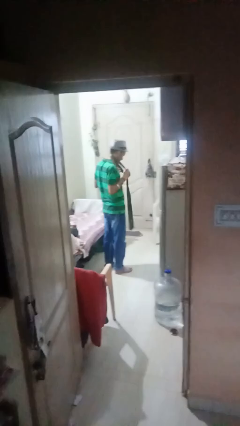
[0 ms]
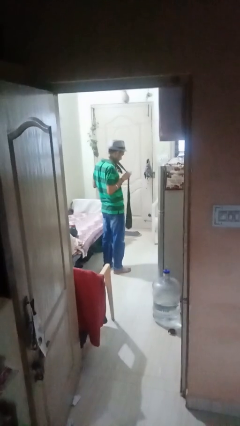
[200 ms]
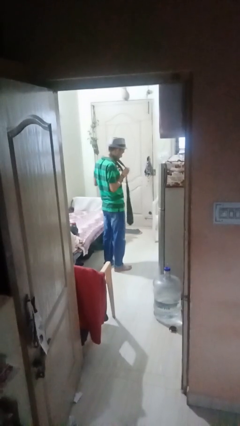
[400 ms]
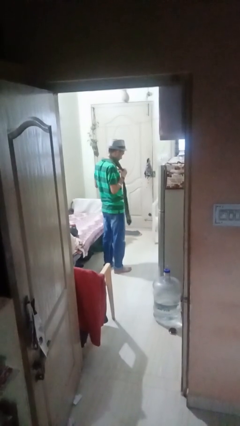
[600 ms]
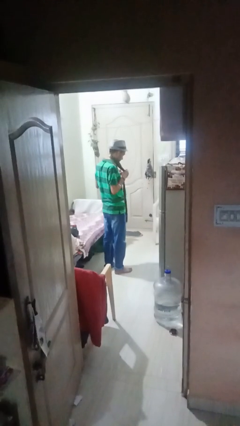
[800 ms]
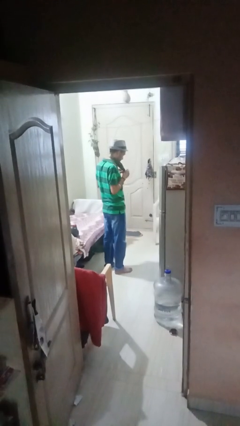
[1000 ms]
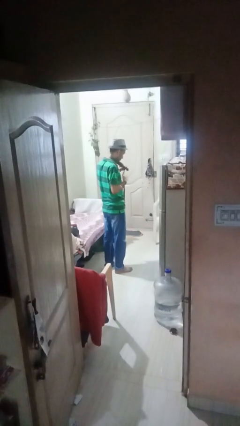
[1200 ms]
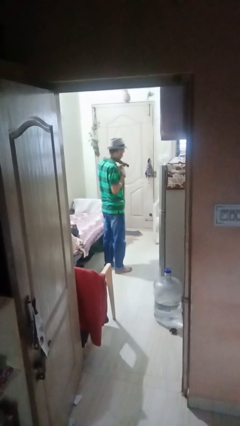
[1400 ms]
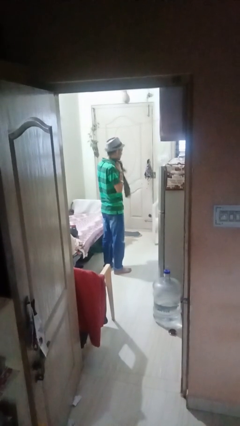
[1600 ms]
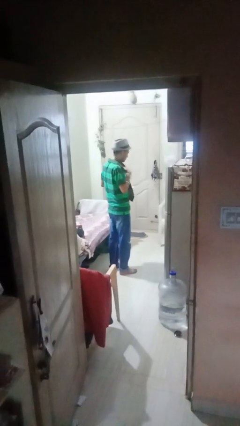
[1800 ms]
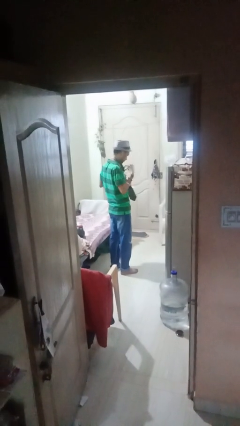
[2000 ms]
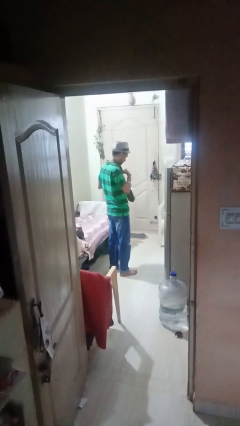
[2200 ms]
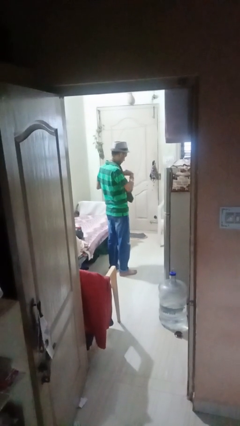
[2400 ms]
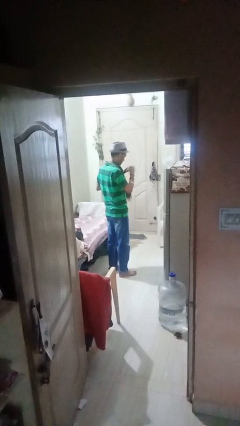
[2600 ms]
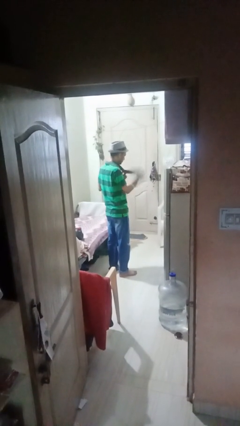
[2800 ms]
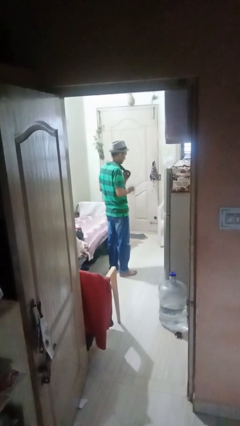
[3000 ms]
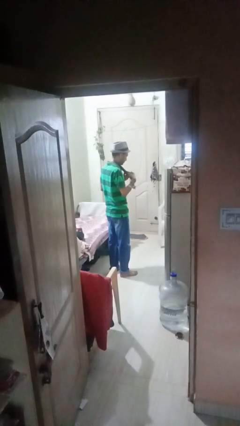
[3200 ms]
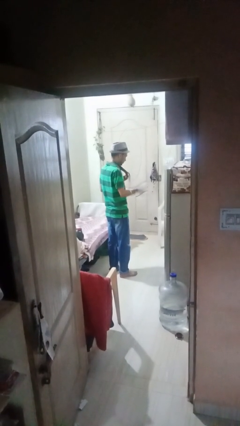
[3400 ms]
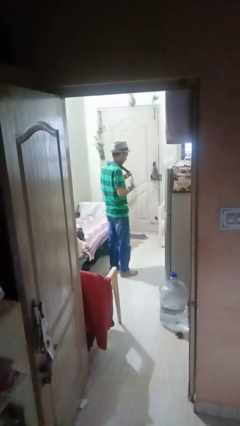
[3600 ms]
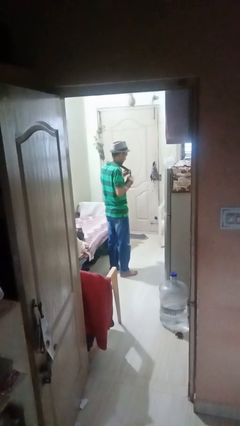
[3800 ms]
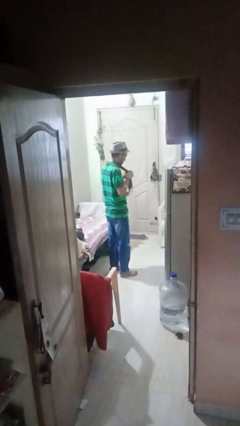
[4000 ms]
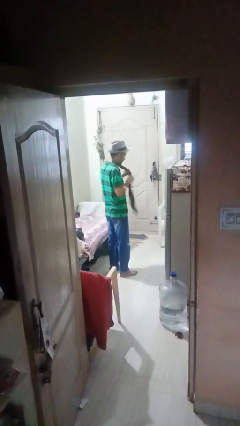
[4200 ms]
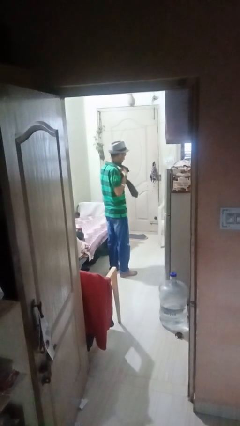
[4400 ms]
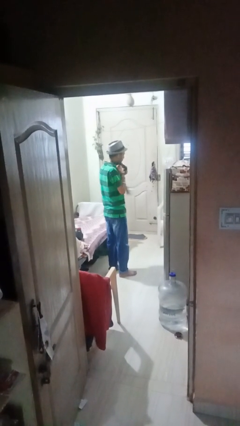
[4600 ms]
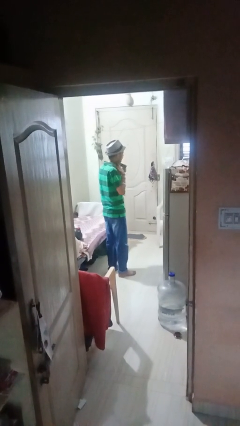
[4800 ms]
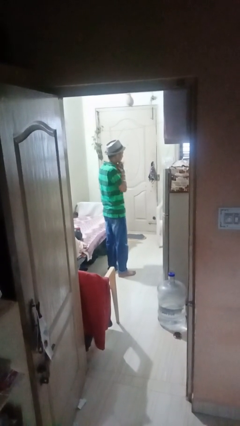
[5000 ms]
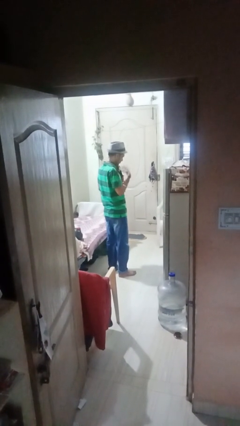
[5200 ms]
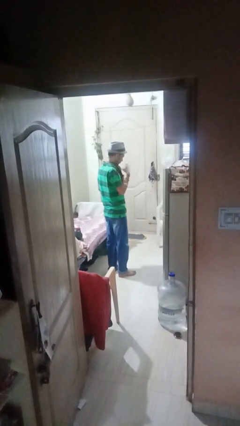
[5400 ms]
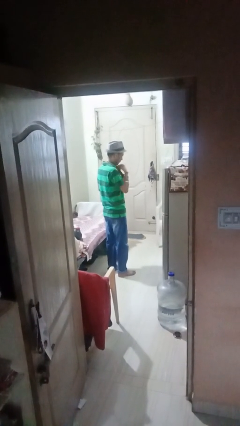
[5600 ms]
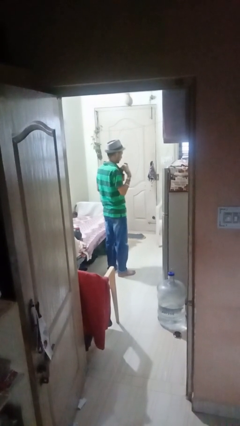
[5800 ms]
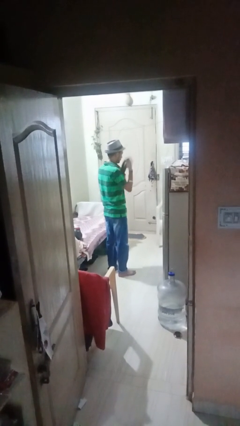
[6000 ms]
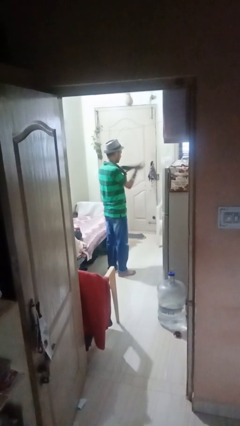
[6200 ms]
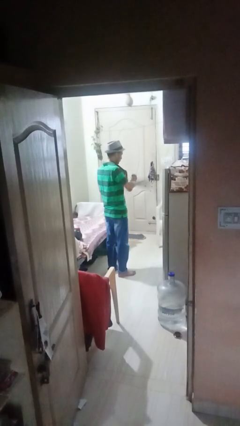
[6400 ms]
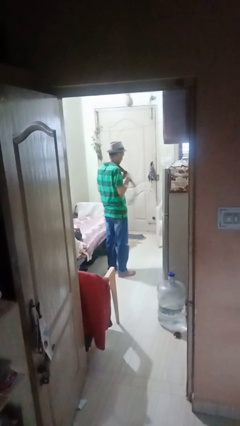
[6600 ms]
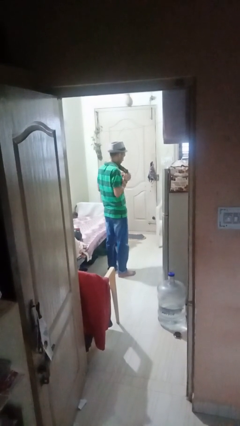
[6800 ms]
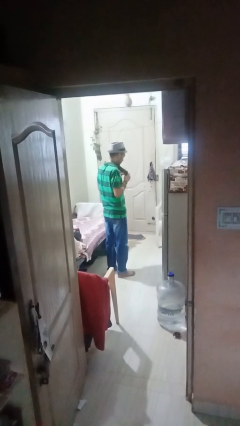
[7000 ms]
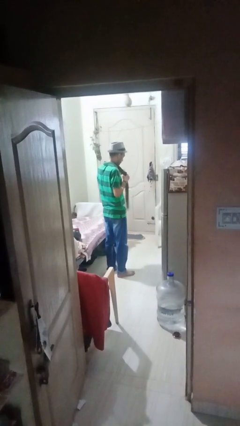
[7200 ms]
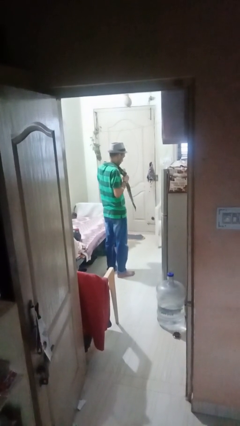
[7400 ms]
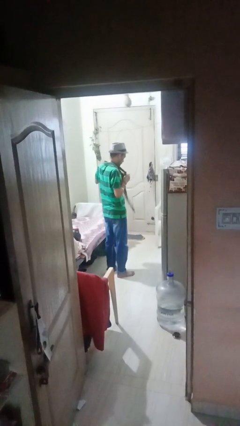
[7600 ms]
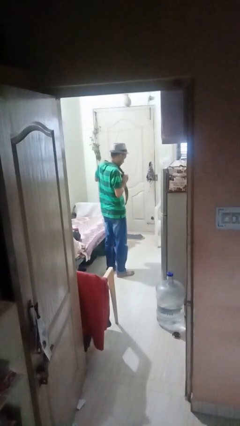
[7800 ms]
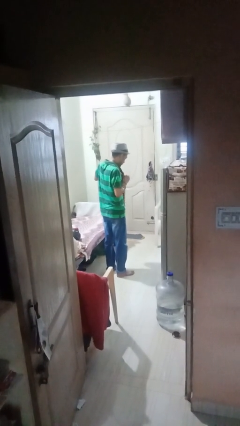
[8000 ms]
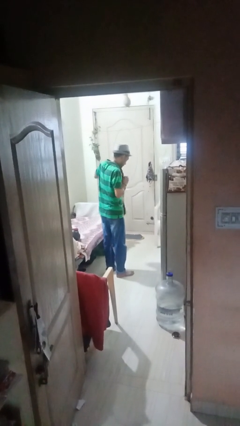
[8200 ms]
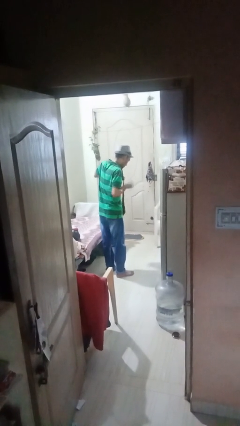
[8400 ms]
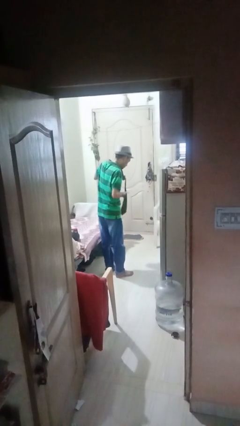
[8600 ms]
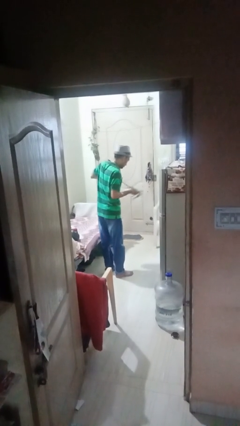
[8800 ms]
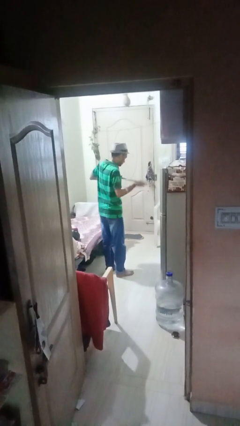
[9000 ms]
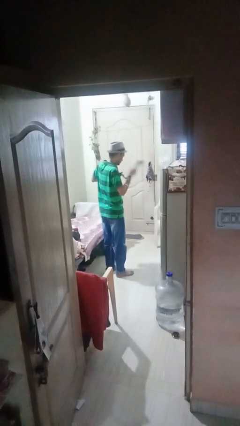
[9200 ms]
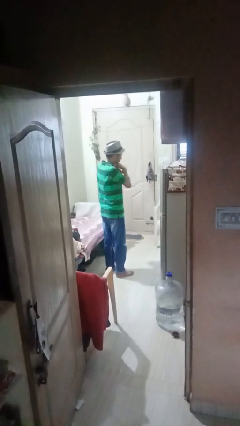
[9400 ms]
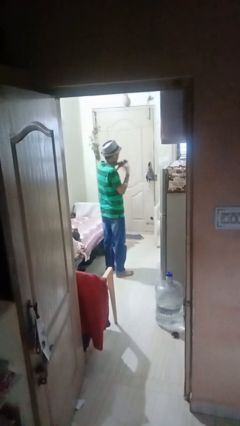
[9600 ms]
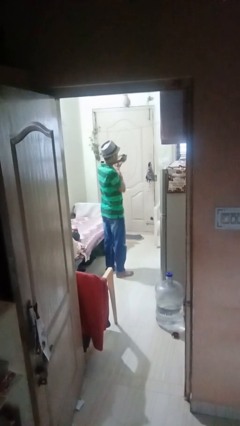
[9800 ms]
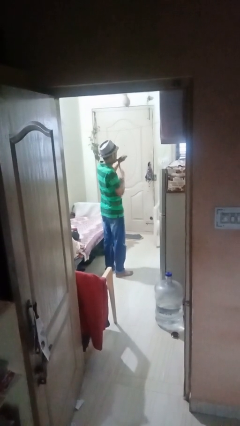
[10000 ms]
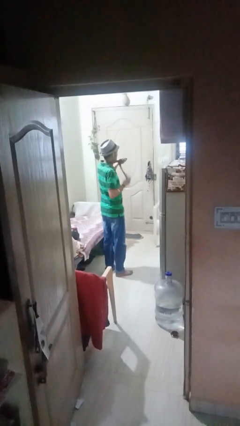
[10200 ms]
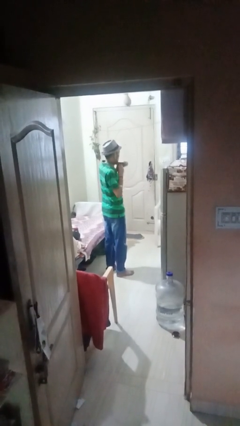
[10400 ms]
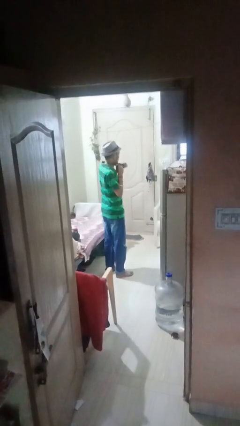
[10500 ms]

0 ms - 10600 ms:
person puts on necktie

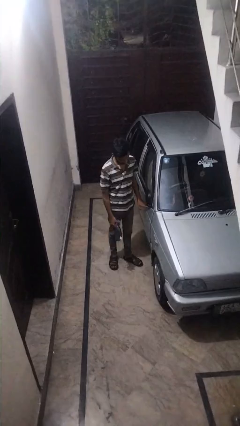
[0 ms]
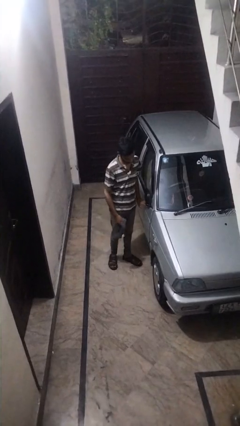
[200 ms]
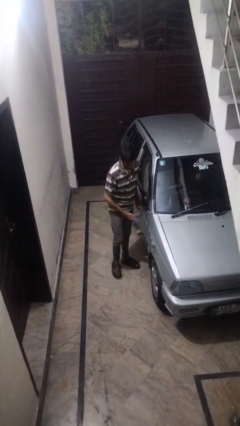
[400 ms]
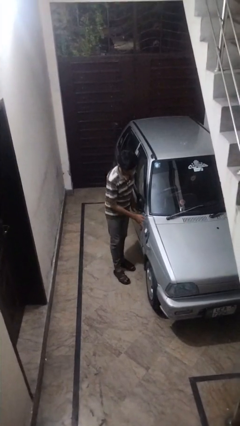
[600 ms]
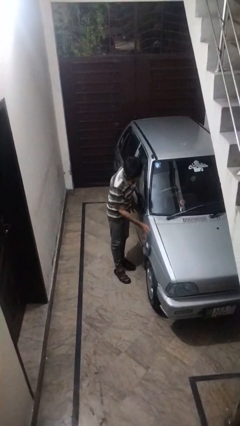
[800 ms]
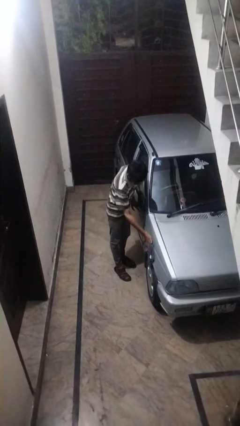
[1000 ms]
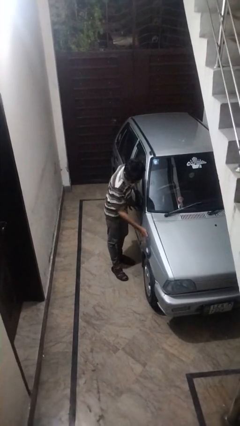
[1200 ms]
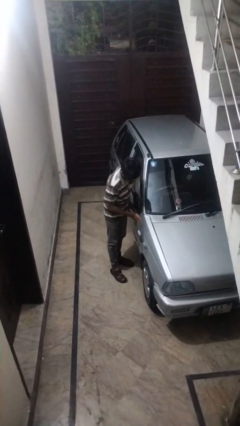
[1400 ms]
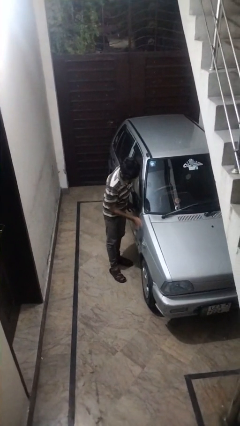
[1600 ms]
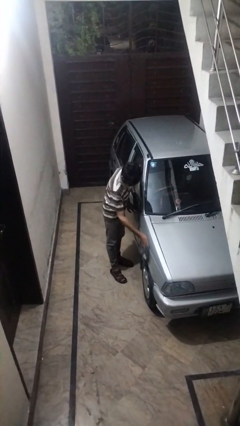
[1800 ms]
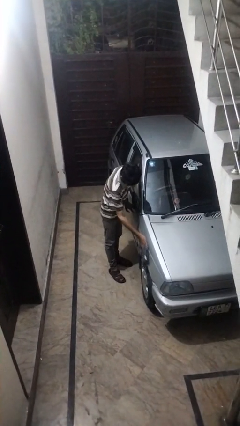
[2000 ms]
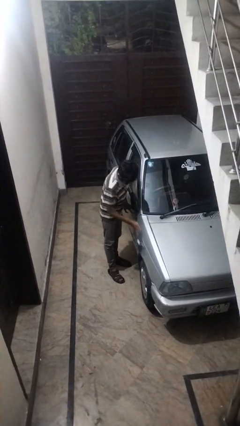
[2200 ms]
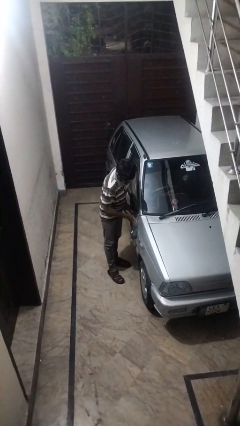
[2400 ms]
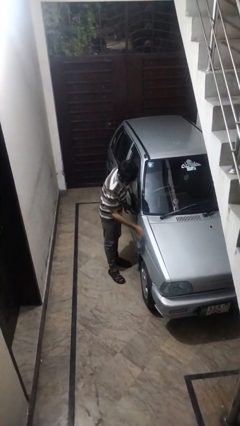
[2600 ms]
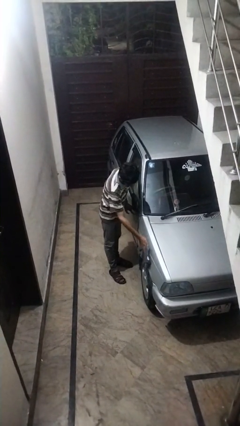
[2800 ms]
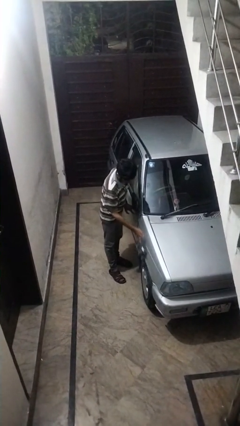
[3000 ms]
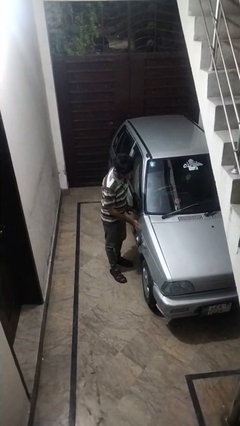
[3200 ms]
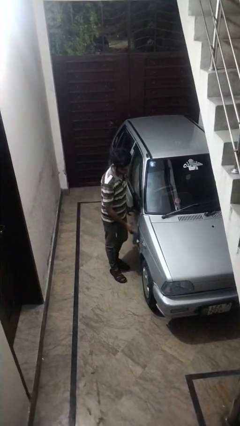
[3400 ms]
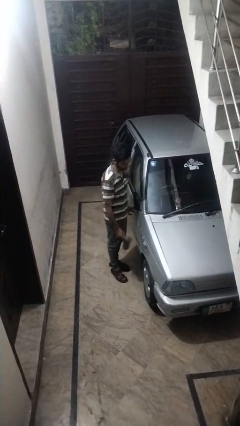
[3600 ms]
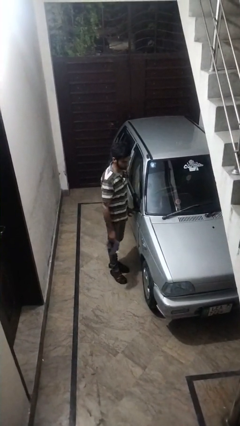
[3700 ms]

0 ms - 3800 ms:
person polishes car with rag

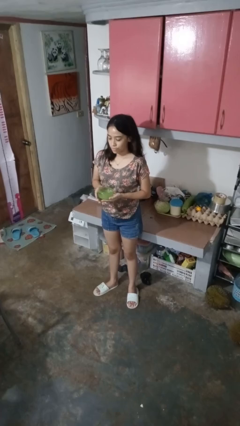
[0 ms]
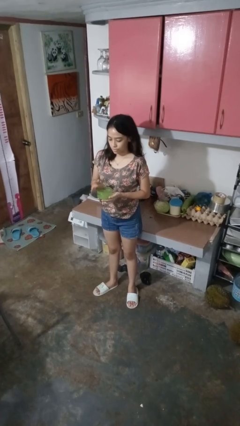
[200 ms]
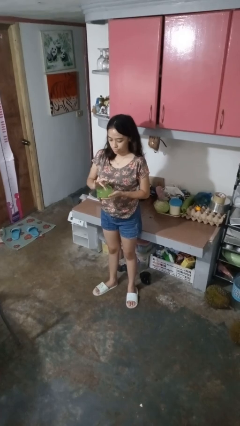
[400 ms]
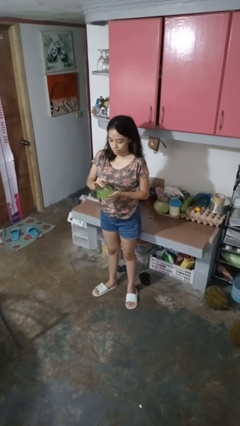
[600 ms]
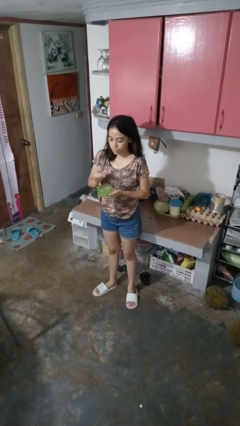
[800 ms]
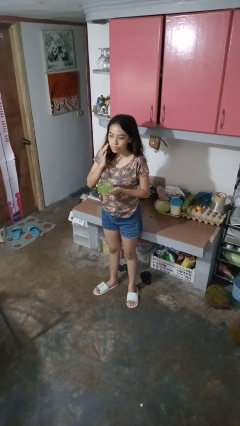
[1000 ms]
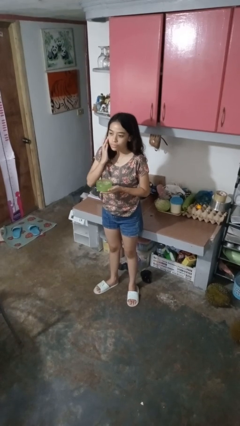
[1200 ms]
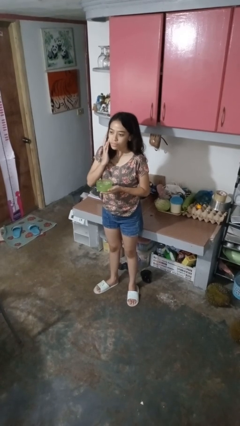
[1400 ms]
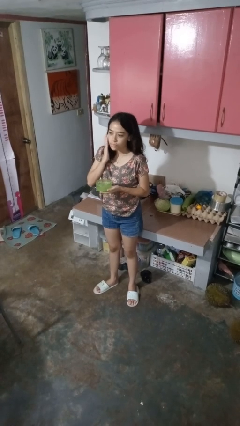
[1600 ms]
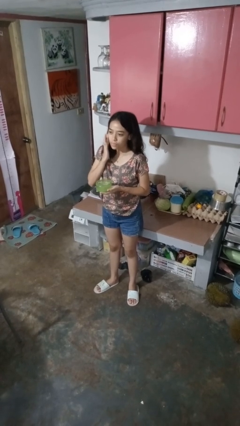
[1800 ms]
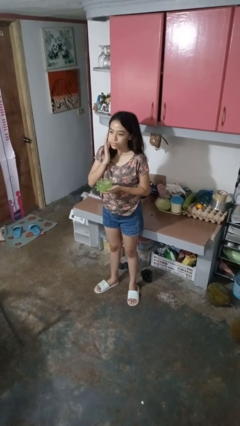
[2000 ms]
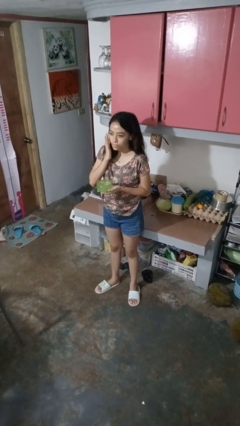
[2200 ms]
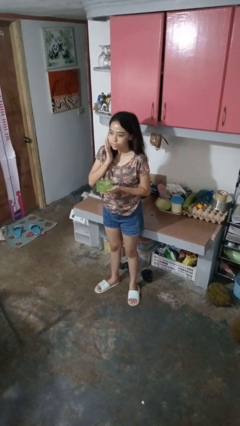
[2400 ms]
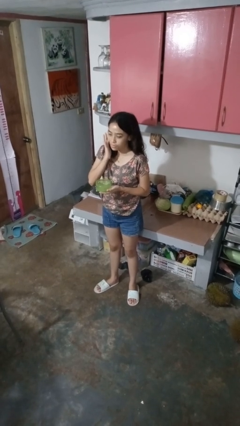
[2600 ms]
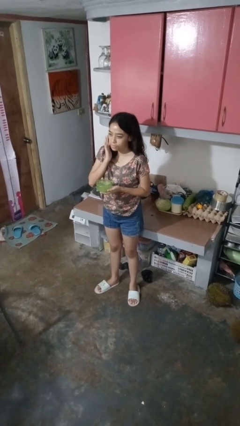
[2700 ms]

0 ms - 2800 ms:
person applies facial moisturizer

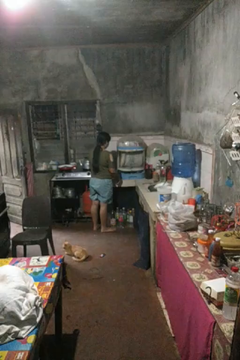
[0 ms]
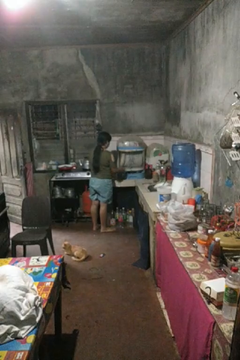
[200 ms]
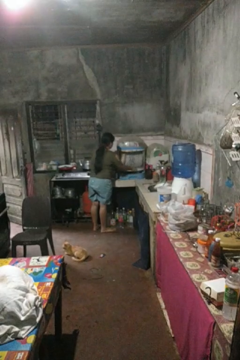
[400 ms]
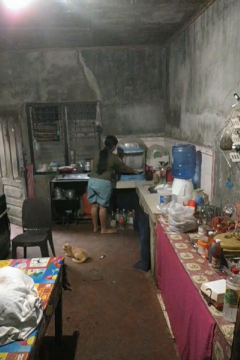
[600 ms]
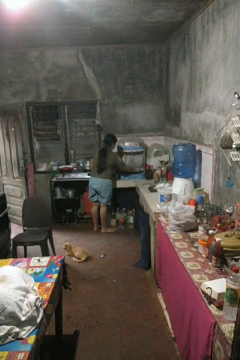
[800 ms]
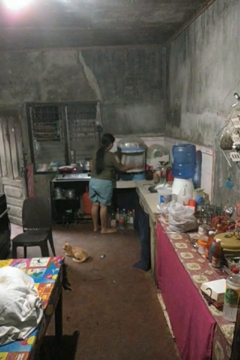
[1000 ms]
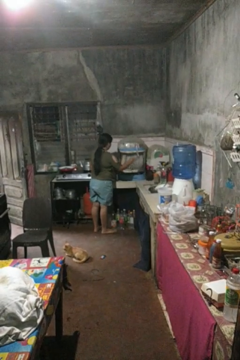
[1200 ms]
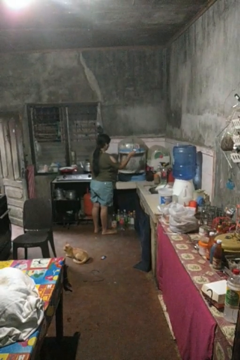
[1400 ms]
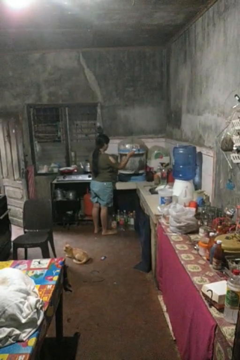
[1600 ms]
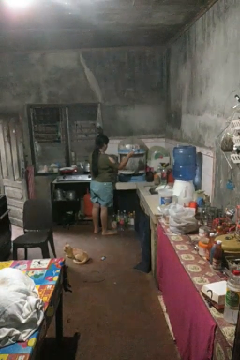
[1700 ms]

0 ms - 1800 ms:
person takes object from kitchen drawer
